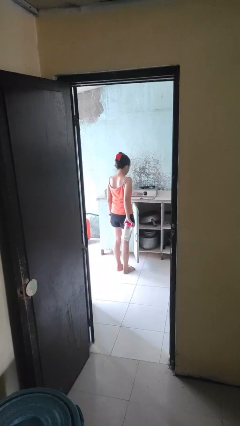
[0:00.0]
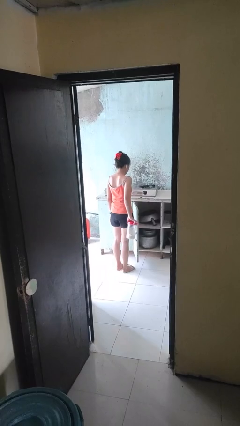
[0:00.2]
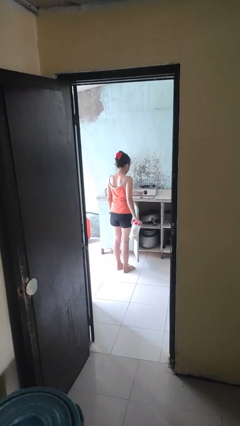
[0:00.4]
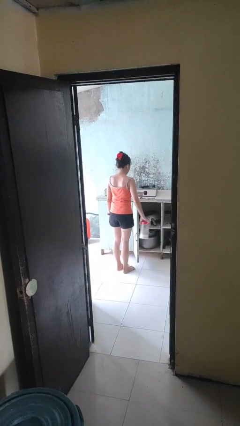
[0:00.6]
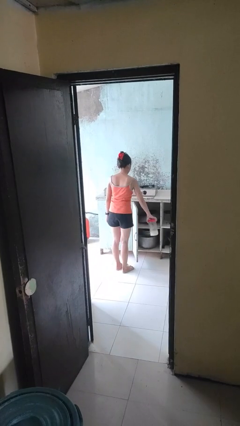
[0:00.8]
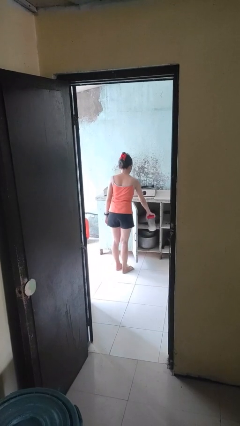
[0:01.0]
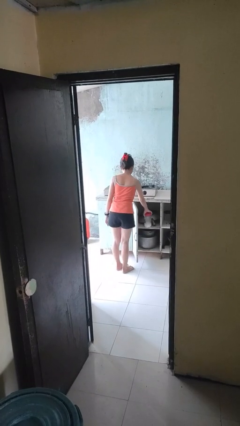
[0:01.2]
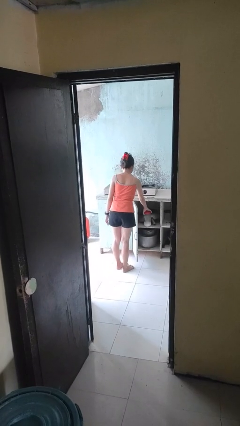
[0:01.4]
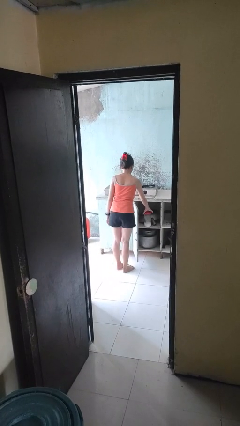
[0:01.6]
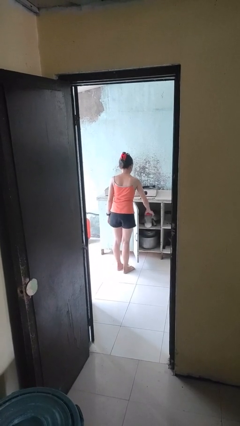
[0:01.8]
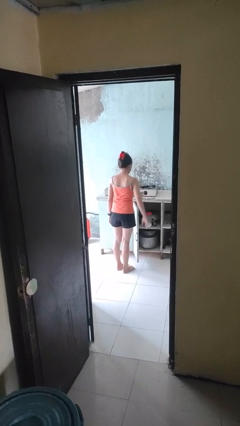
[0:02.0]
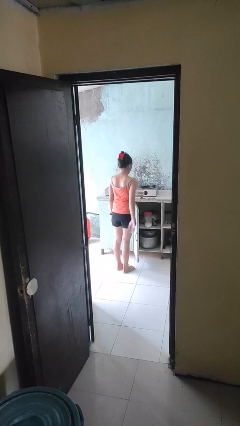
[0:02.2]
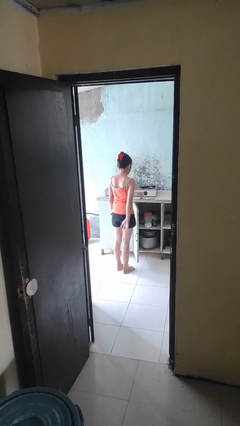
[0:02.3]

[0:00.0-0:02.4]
person puts down object into cabinet

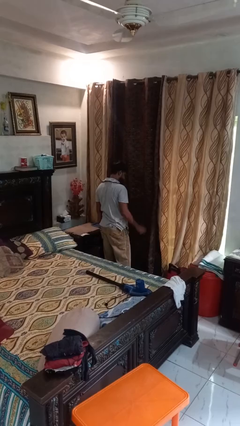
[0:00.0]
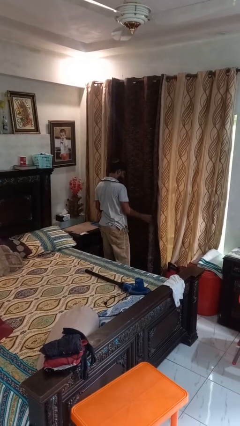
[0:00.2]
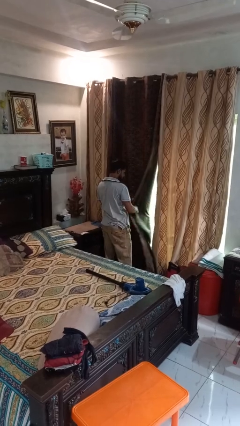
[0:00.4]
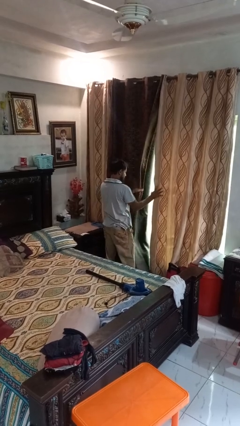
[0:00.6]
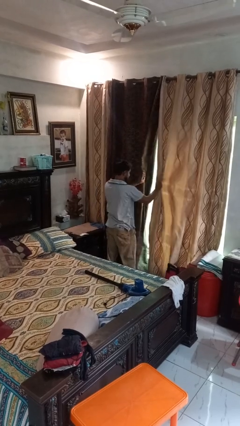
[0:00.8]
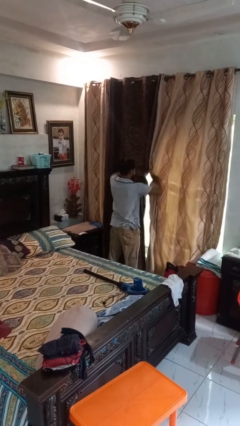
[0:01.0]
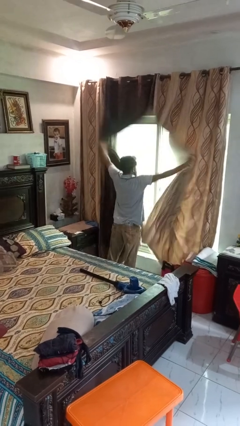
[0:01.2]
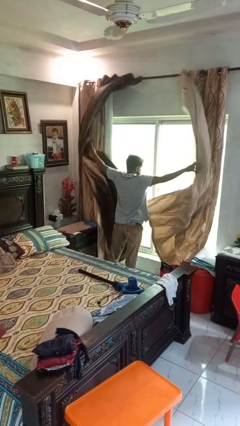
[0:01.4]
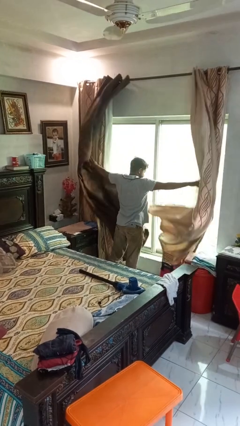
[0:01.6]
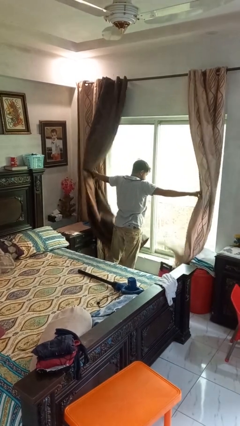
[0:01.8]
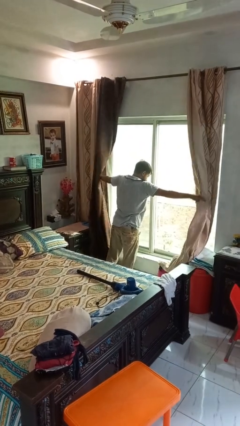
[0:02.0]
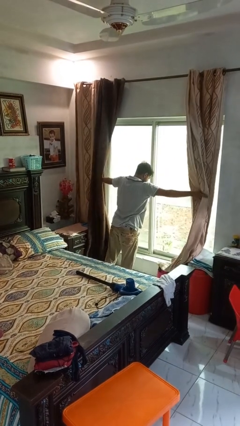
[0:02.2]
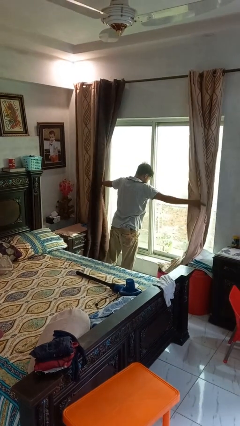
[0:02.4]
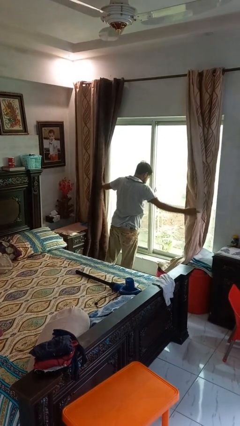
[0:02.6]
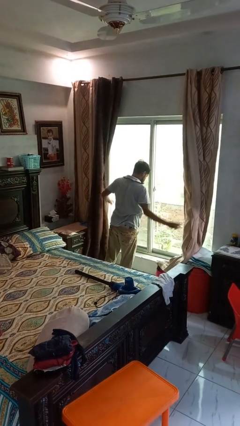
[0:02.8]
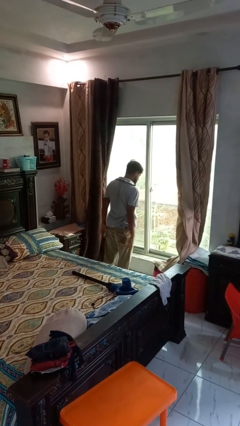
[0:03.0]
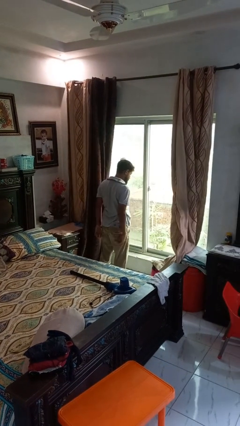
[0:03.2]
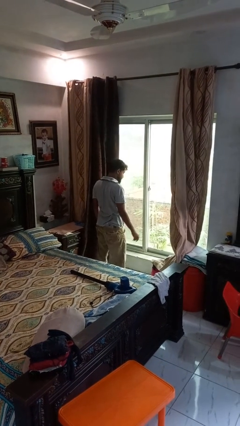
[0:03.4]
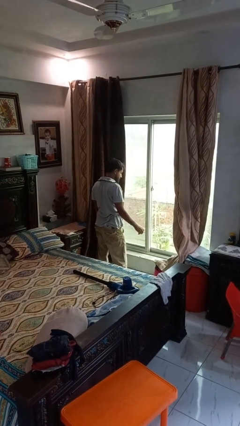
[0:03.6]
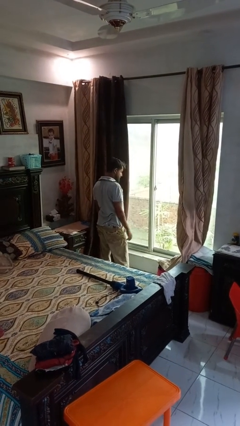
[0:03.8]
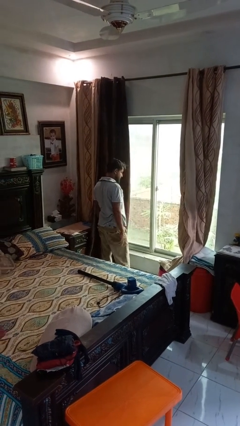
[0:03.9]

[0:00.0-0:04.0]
person opens curtains

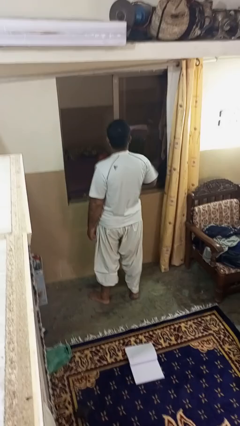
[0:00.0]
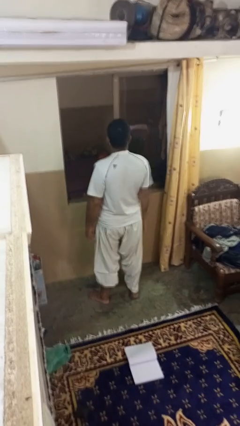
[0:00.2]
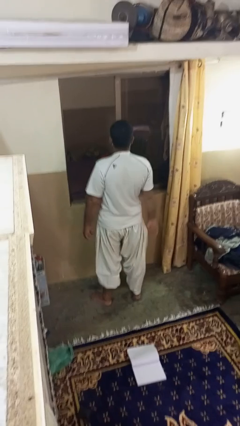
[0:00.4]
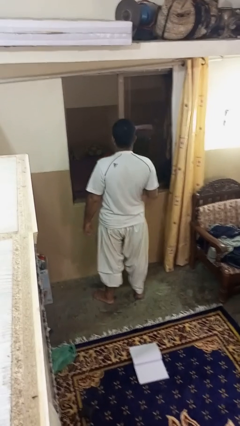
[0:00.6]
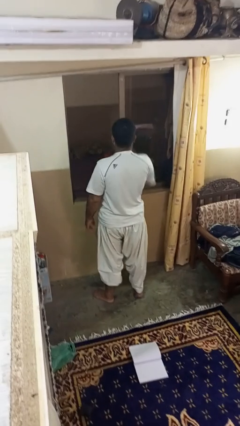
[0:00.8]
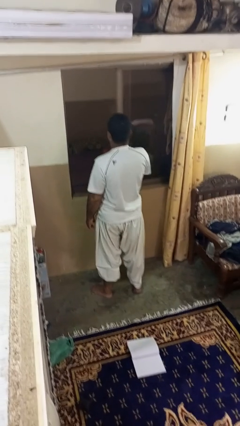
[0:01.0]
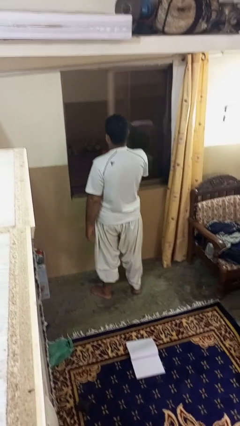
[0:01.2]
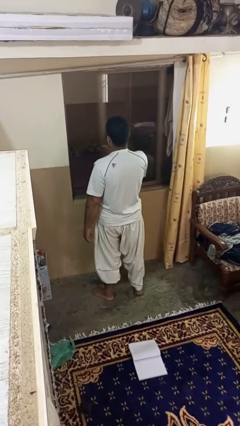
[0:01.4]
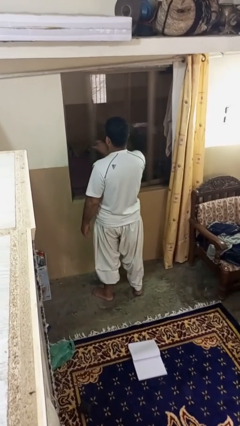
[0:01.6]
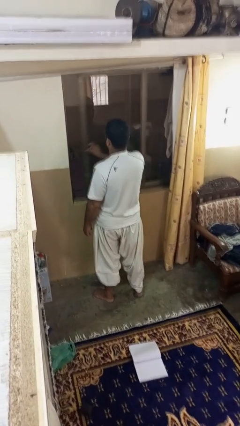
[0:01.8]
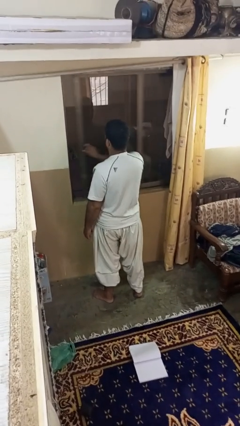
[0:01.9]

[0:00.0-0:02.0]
person closes home window

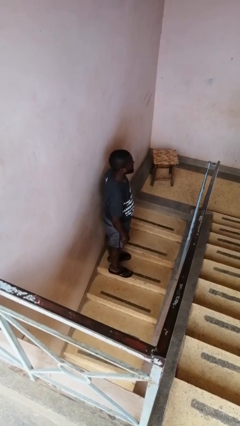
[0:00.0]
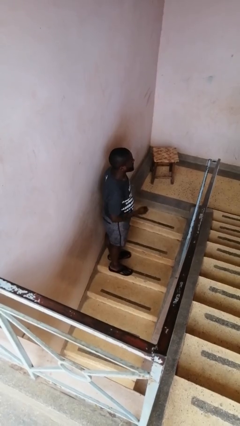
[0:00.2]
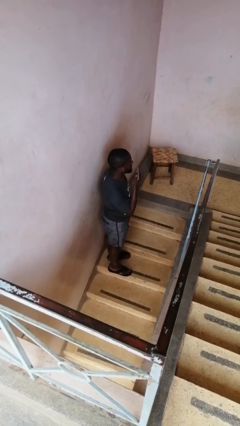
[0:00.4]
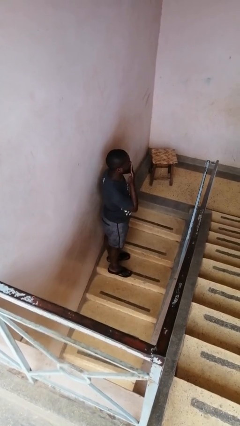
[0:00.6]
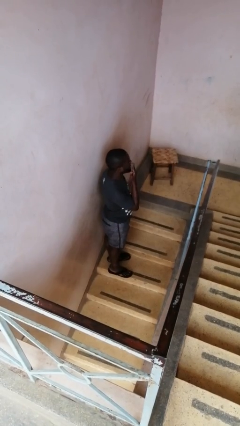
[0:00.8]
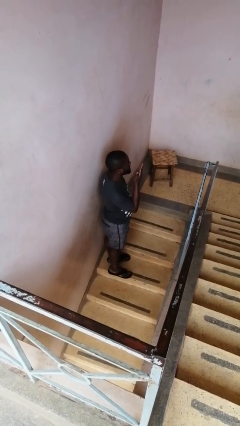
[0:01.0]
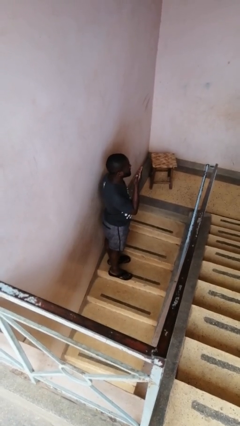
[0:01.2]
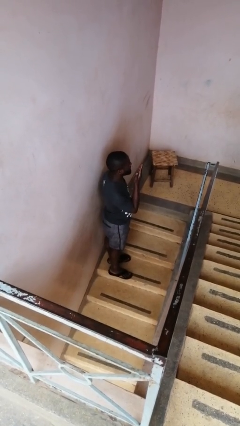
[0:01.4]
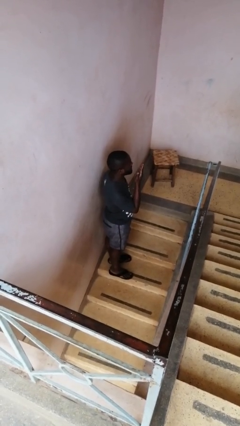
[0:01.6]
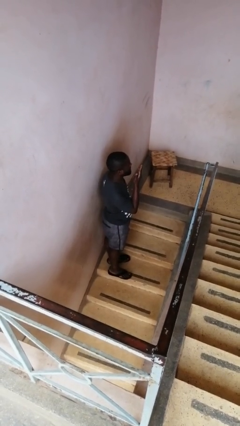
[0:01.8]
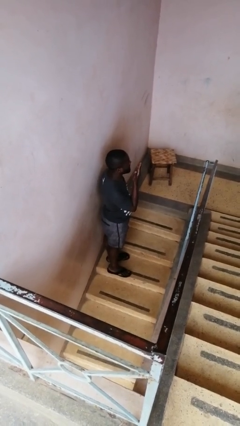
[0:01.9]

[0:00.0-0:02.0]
person gestures blow kiss

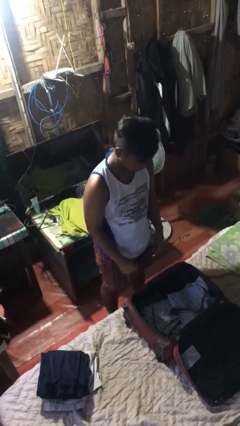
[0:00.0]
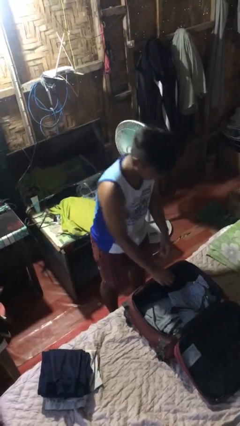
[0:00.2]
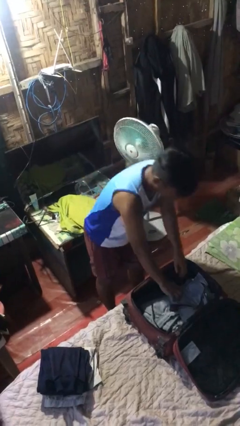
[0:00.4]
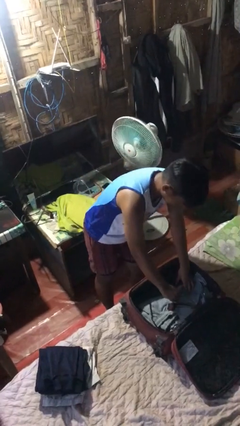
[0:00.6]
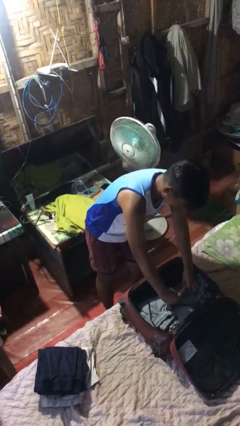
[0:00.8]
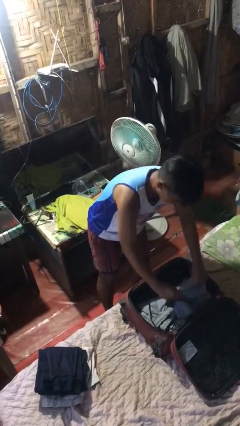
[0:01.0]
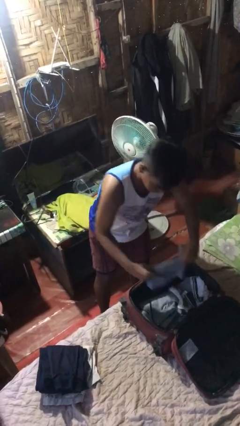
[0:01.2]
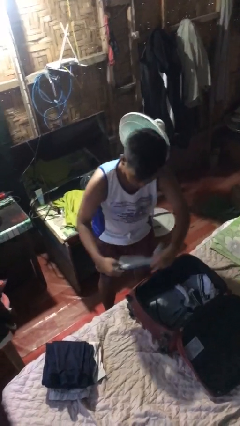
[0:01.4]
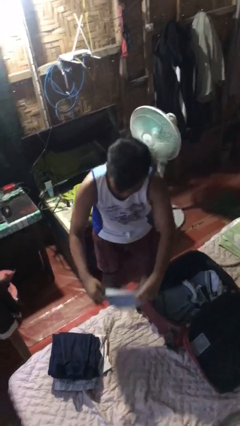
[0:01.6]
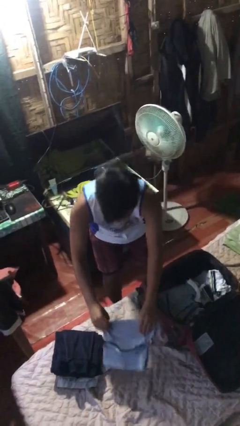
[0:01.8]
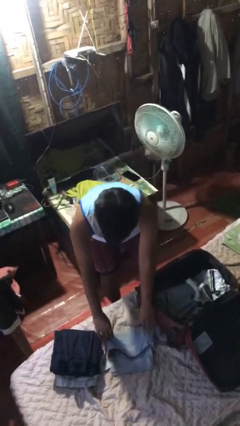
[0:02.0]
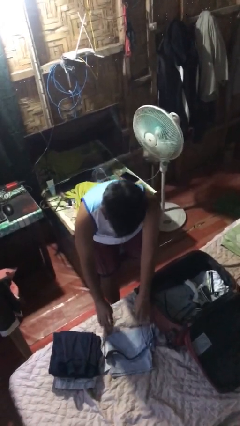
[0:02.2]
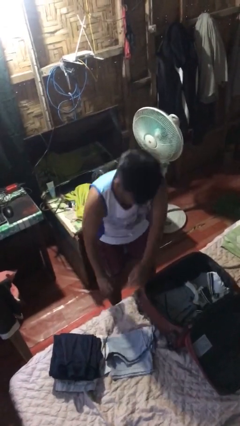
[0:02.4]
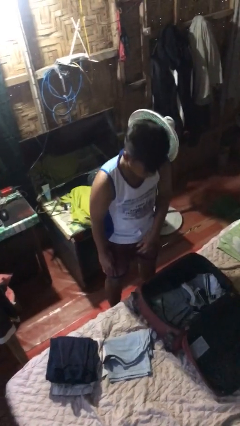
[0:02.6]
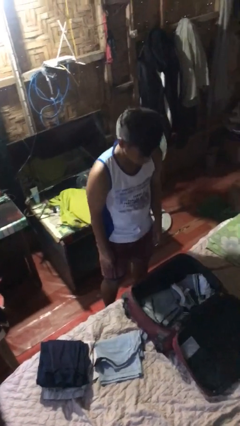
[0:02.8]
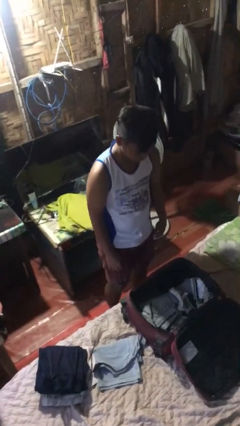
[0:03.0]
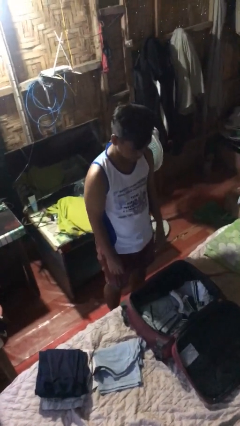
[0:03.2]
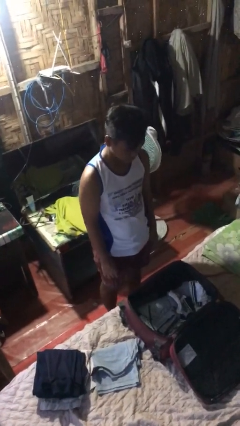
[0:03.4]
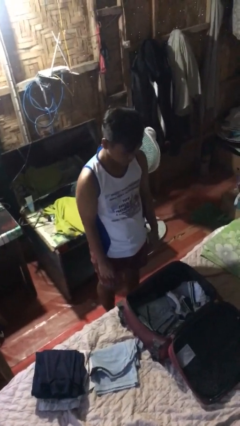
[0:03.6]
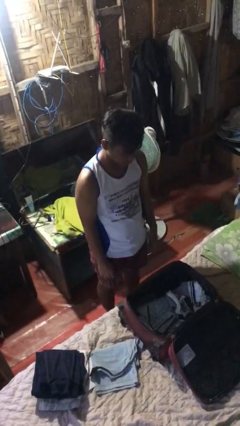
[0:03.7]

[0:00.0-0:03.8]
person unloads clothes from suitcase

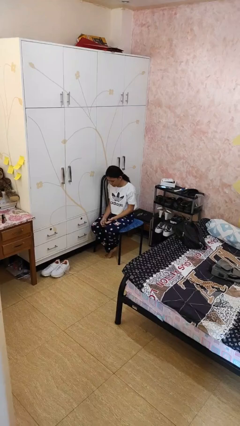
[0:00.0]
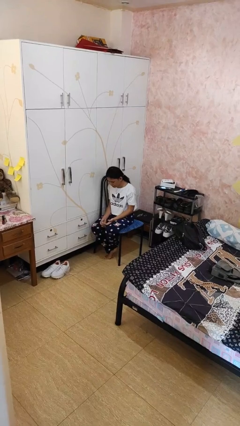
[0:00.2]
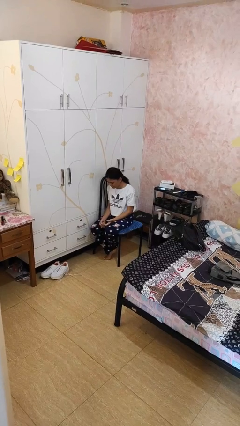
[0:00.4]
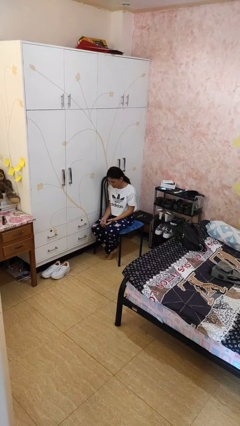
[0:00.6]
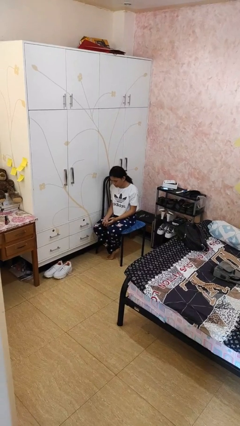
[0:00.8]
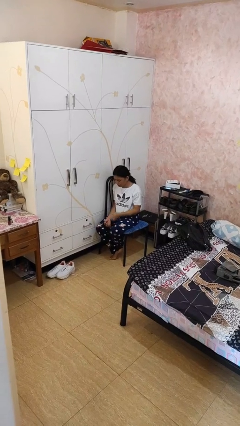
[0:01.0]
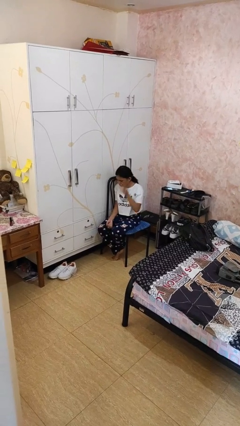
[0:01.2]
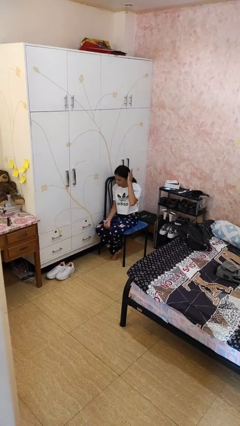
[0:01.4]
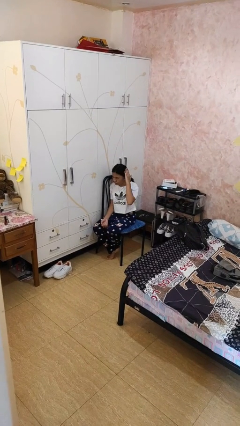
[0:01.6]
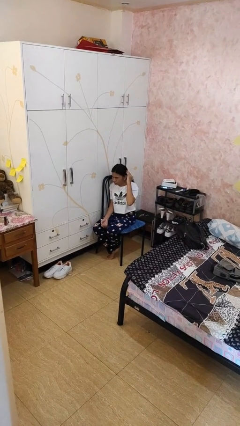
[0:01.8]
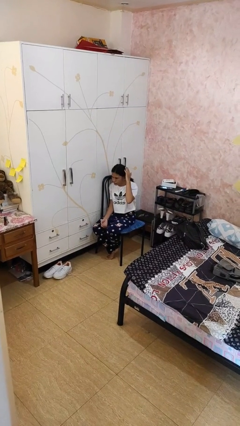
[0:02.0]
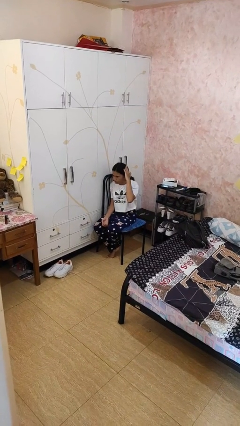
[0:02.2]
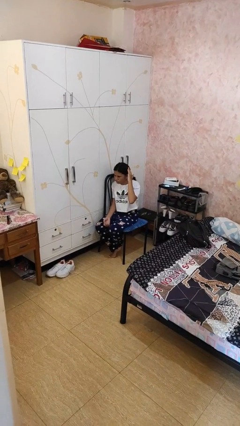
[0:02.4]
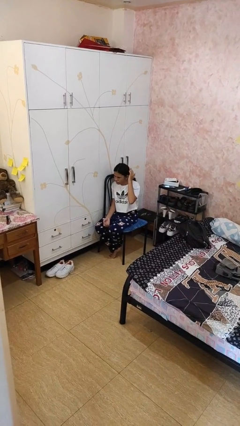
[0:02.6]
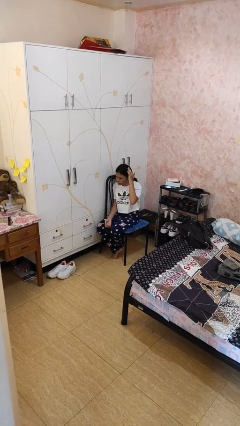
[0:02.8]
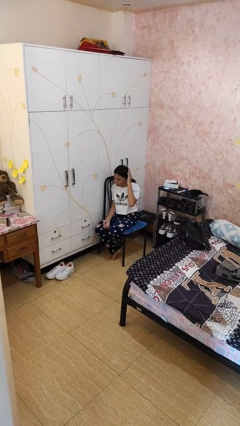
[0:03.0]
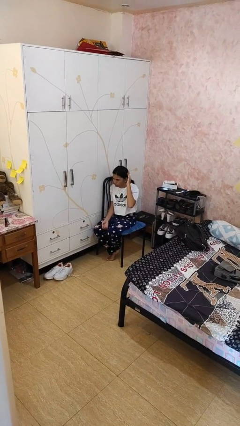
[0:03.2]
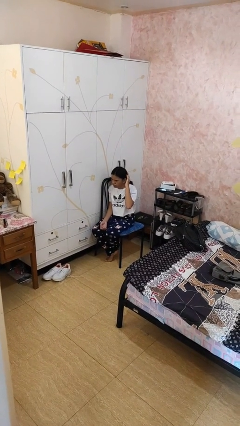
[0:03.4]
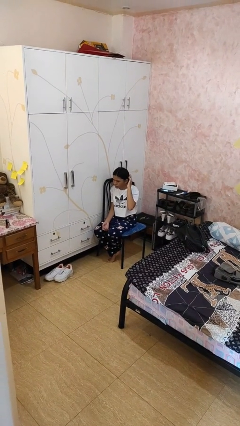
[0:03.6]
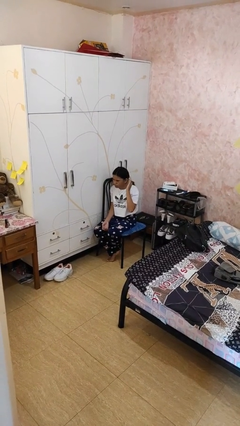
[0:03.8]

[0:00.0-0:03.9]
person pats head
